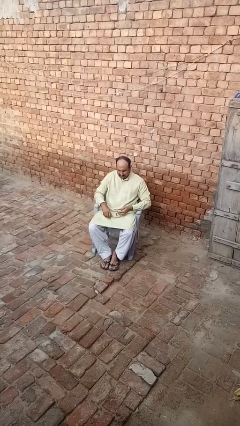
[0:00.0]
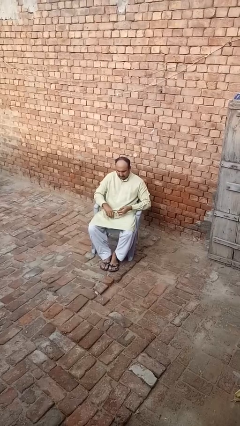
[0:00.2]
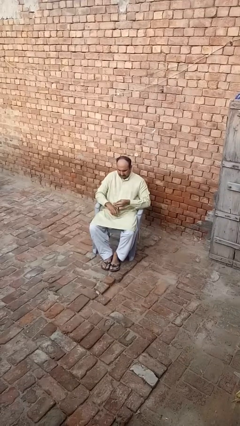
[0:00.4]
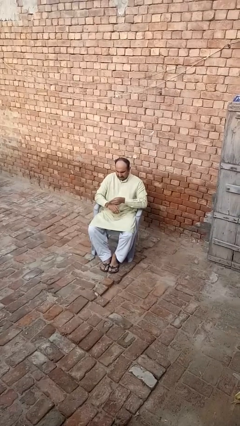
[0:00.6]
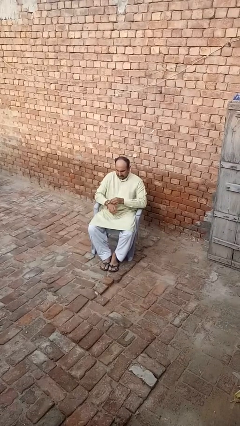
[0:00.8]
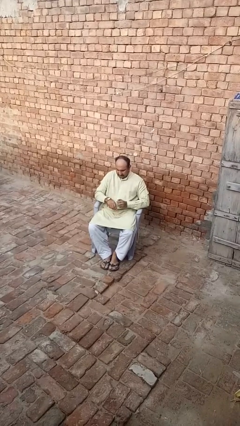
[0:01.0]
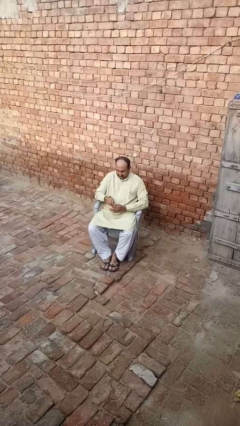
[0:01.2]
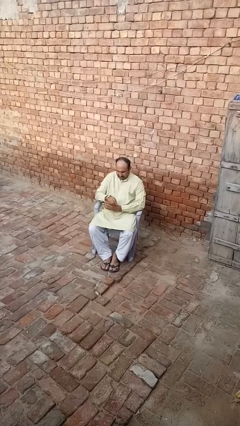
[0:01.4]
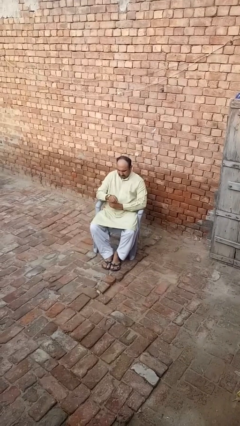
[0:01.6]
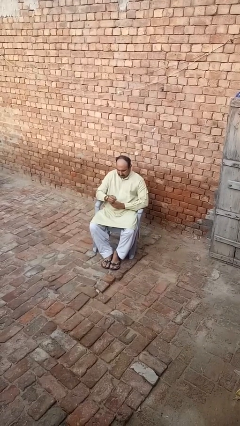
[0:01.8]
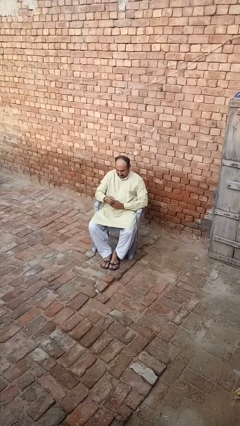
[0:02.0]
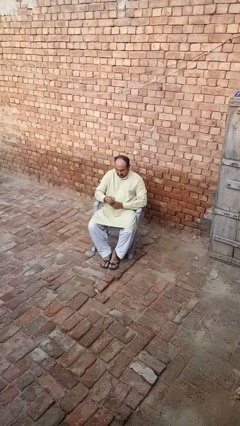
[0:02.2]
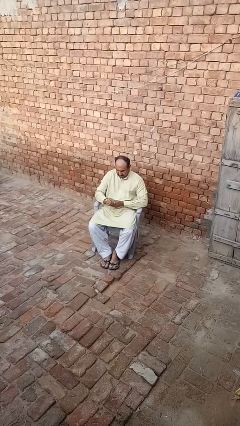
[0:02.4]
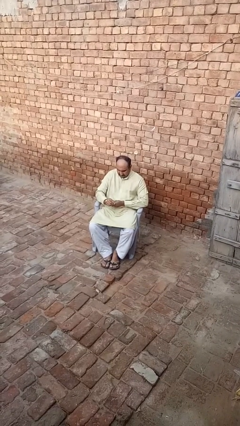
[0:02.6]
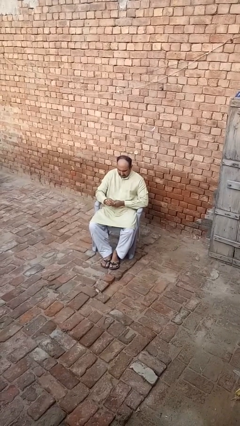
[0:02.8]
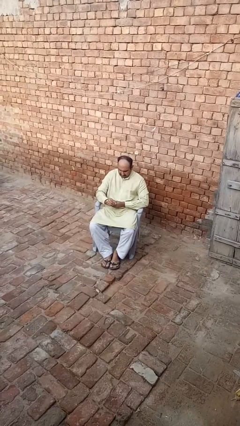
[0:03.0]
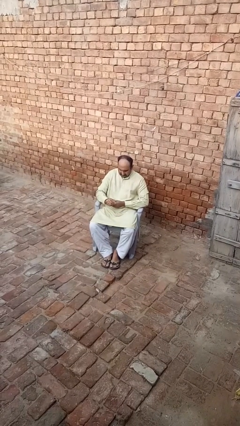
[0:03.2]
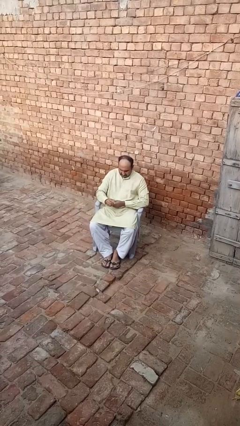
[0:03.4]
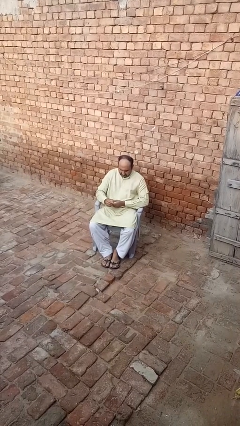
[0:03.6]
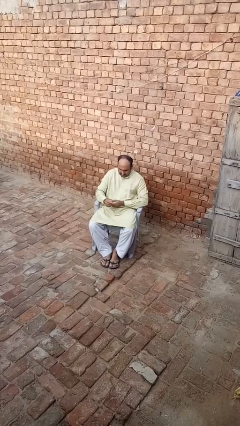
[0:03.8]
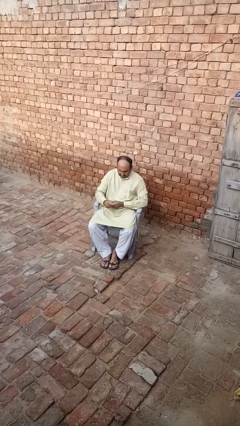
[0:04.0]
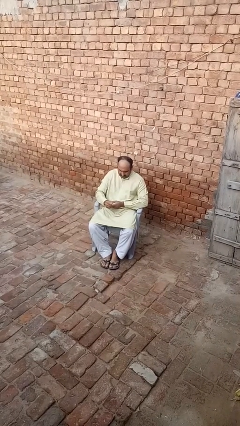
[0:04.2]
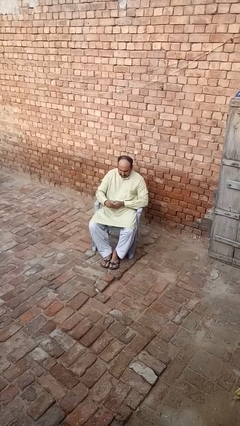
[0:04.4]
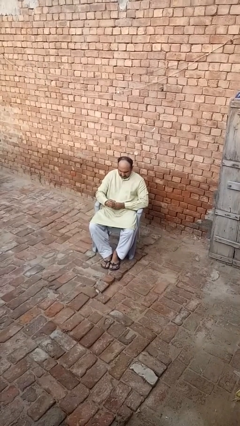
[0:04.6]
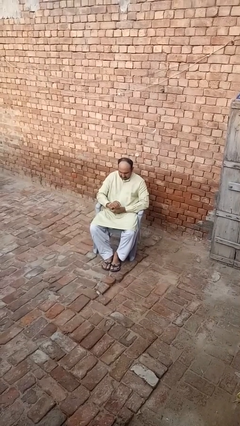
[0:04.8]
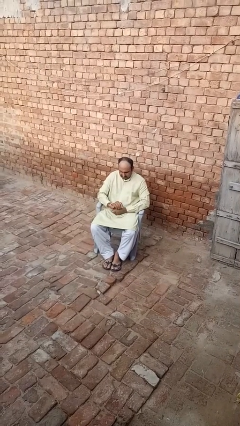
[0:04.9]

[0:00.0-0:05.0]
person puts on wristwatch

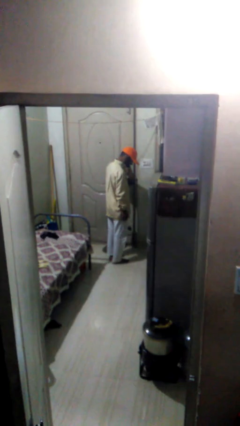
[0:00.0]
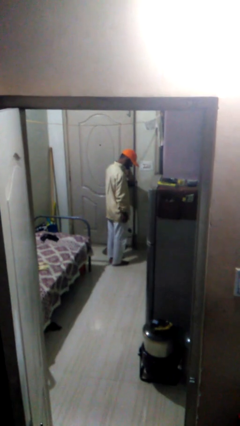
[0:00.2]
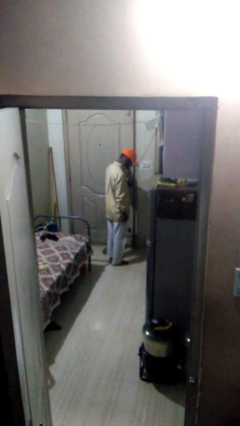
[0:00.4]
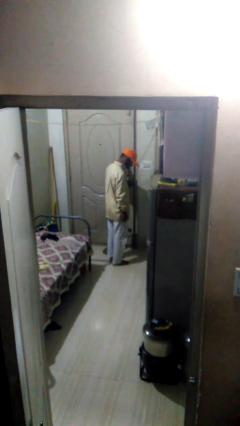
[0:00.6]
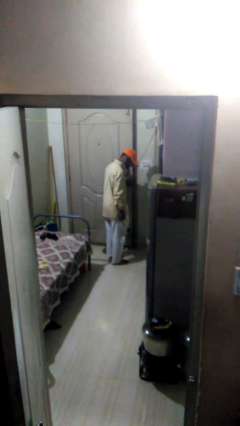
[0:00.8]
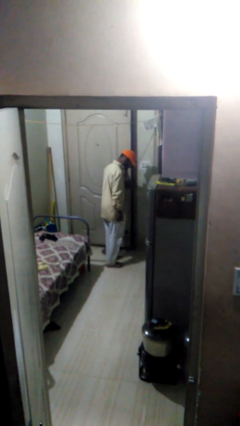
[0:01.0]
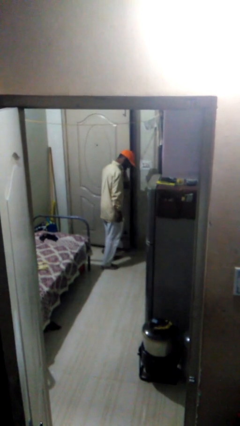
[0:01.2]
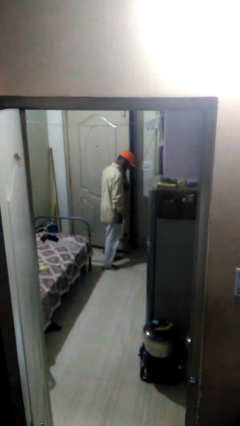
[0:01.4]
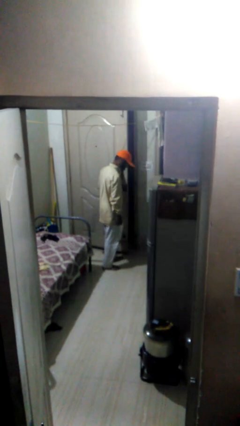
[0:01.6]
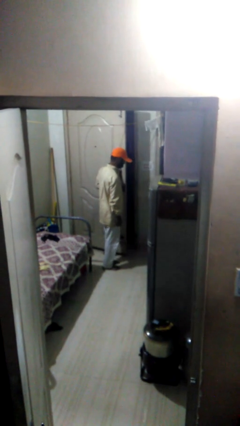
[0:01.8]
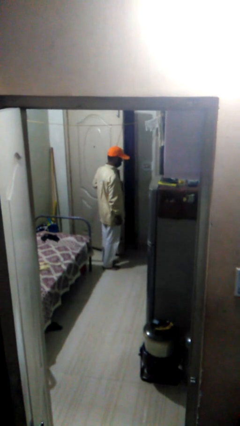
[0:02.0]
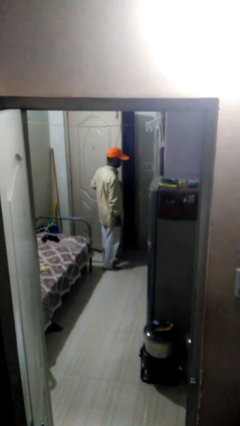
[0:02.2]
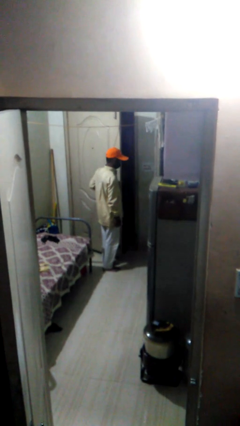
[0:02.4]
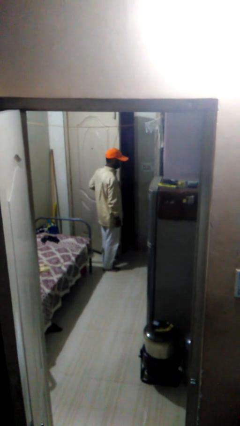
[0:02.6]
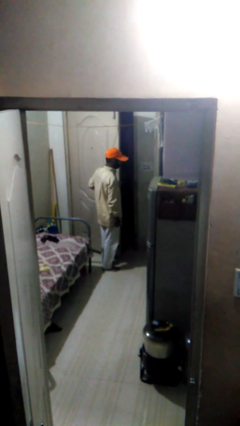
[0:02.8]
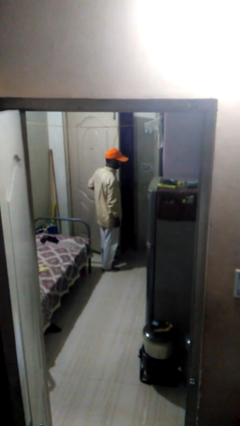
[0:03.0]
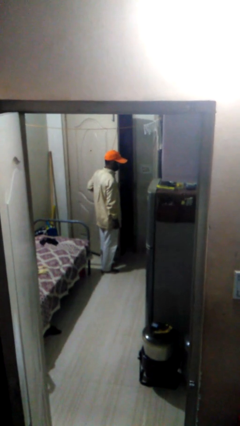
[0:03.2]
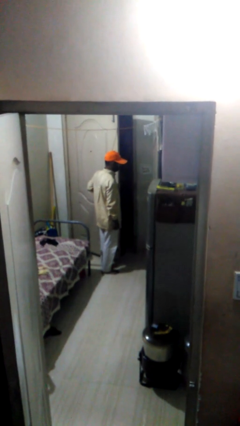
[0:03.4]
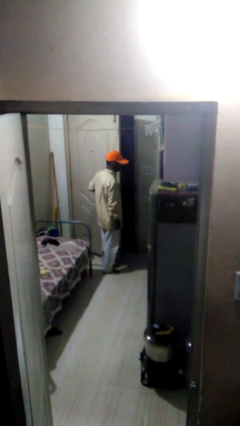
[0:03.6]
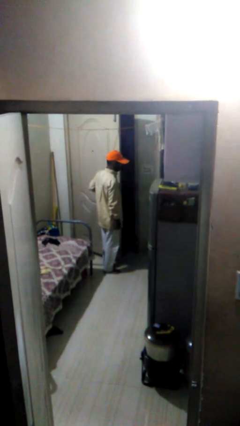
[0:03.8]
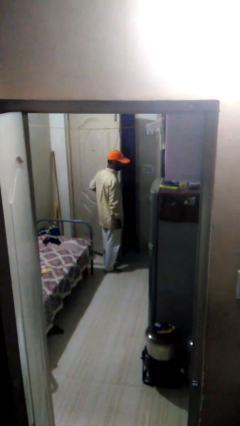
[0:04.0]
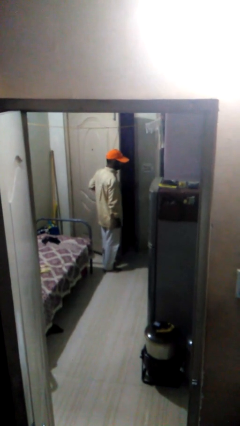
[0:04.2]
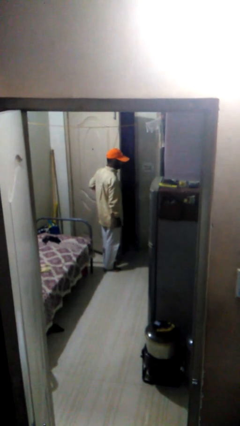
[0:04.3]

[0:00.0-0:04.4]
person opens facility door

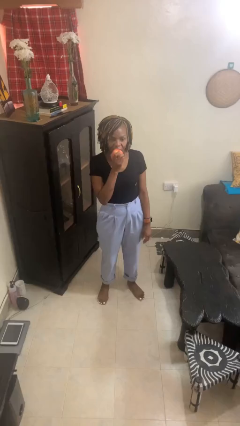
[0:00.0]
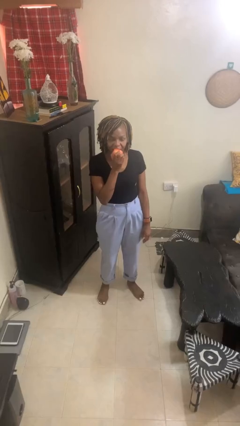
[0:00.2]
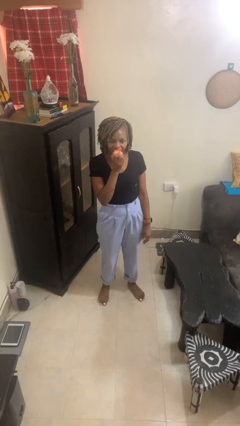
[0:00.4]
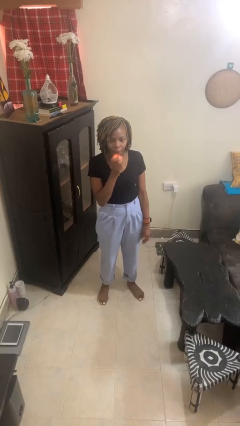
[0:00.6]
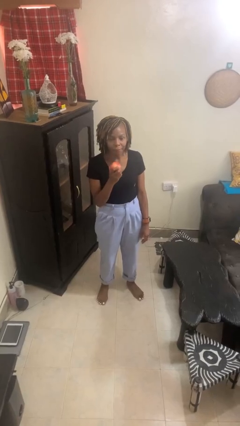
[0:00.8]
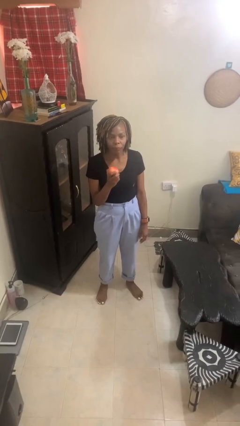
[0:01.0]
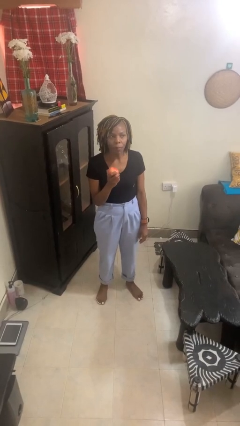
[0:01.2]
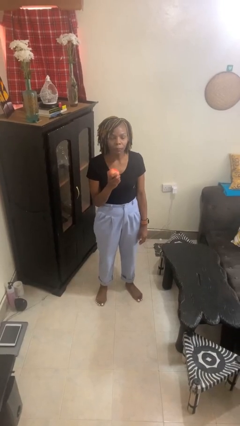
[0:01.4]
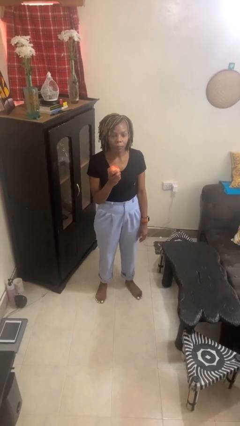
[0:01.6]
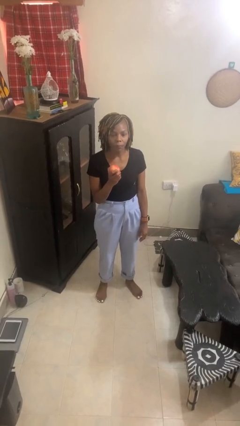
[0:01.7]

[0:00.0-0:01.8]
person eats apple

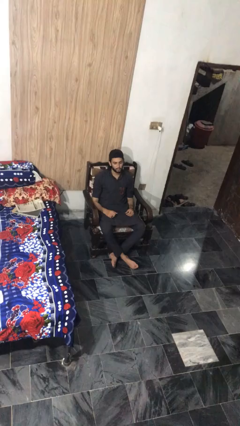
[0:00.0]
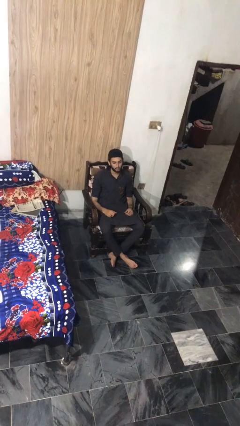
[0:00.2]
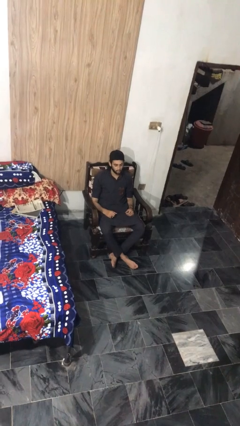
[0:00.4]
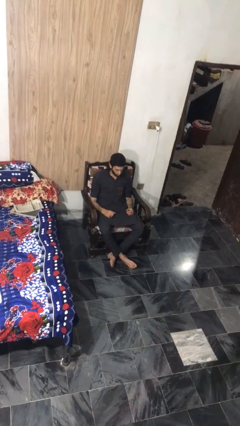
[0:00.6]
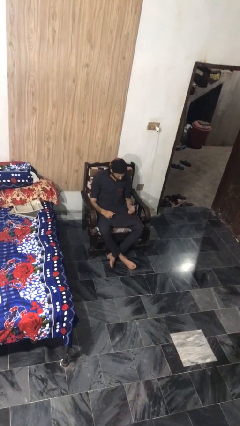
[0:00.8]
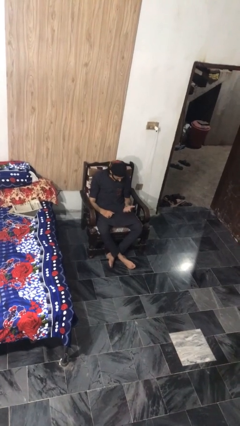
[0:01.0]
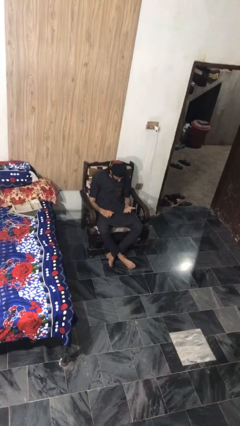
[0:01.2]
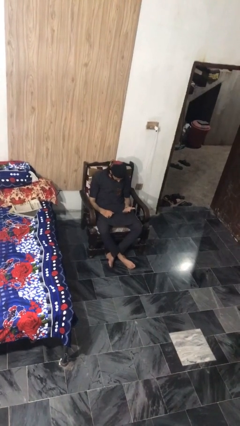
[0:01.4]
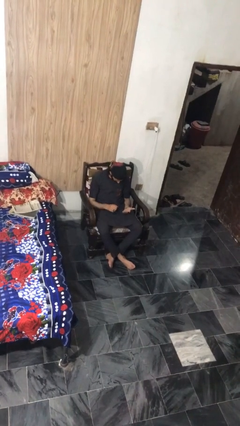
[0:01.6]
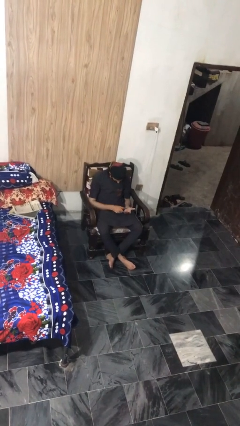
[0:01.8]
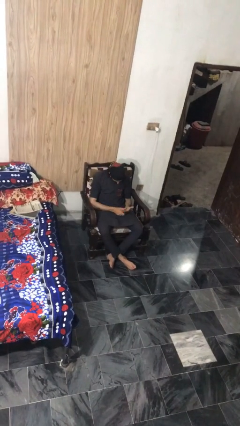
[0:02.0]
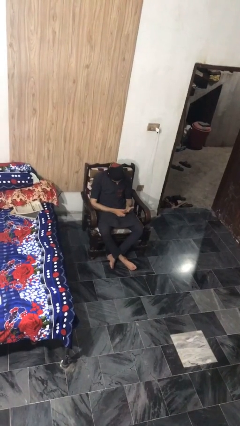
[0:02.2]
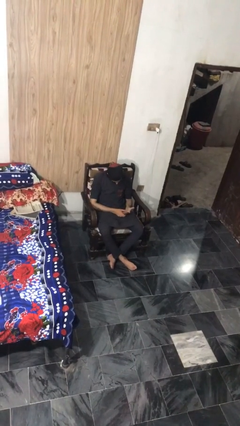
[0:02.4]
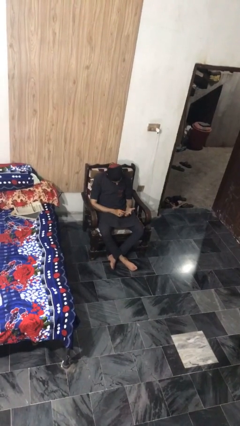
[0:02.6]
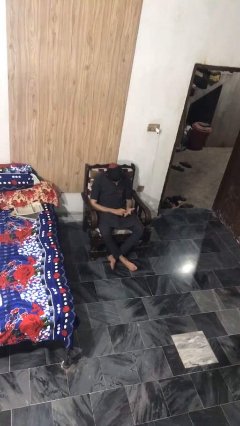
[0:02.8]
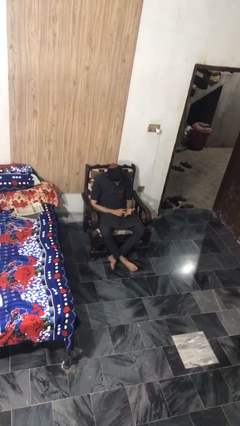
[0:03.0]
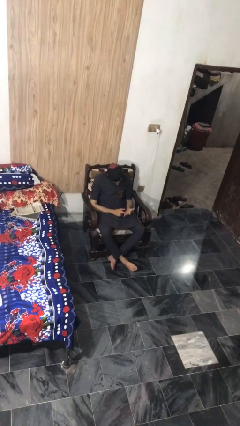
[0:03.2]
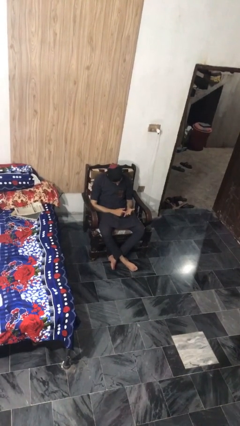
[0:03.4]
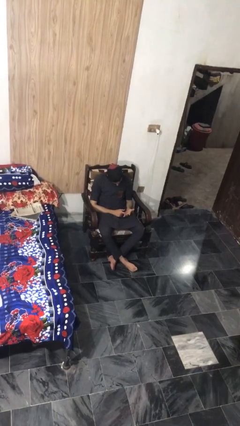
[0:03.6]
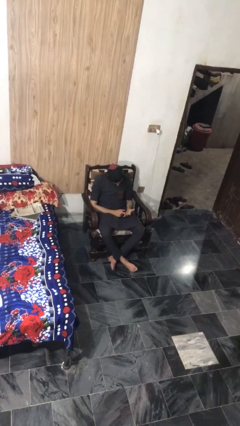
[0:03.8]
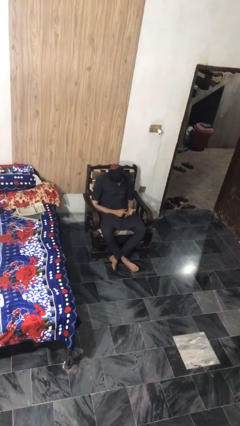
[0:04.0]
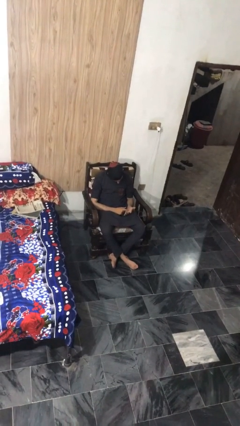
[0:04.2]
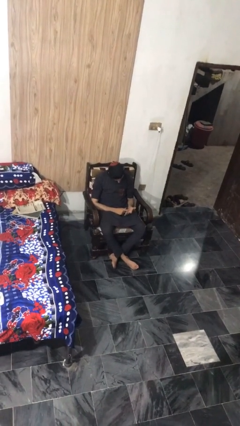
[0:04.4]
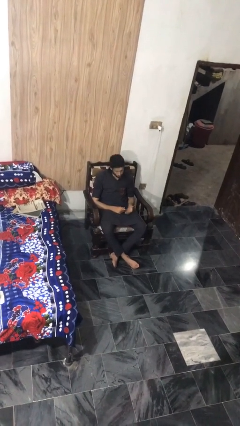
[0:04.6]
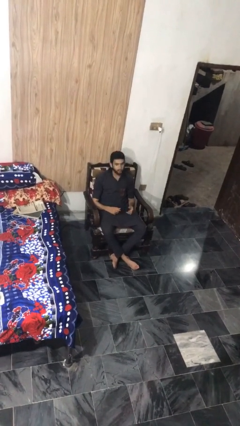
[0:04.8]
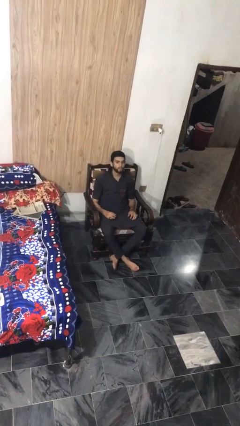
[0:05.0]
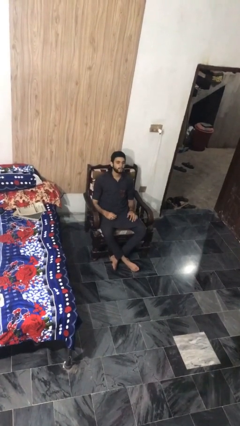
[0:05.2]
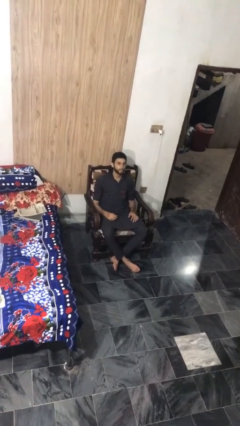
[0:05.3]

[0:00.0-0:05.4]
person looks at hands in lap

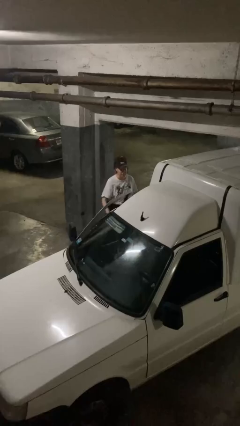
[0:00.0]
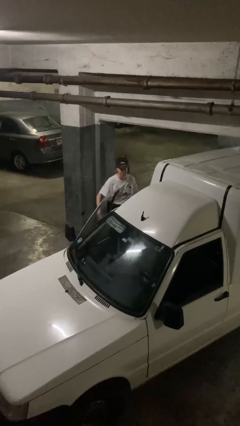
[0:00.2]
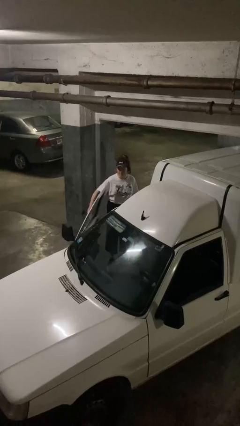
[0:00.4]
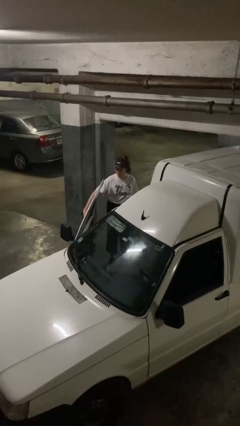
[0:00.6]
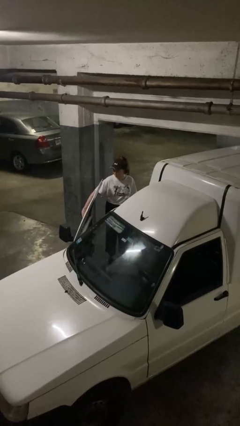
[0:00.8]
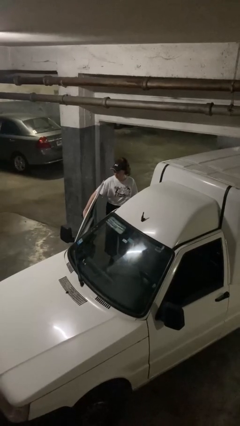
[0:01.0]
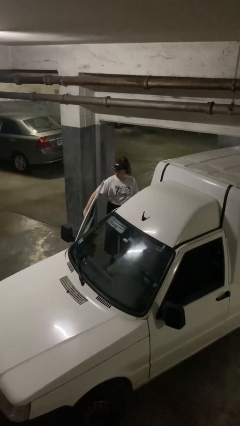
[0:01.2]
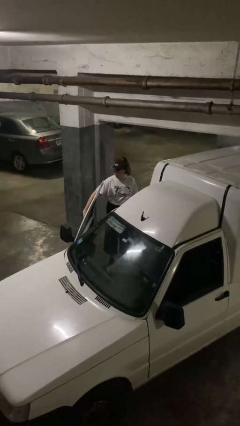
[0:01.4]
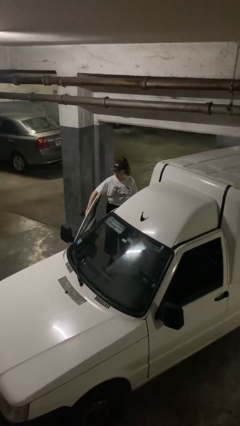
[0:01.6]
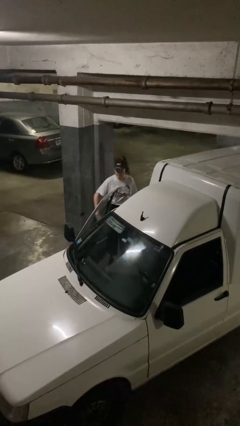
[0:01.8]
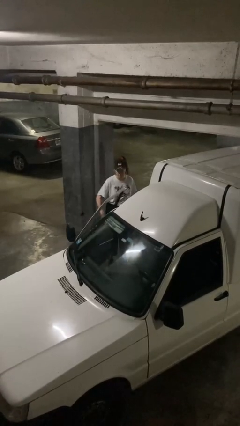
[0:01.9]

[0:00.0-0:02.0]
person opens car door
